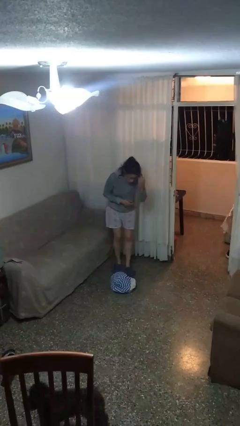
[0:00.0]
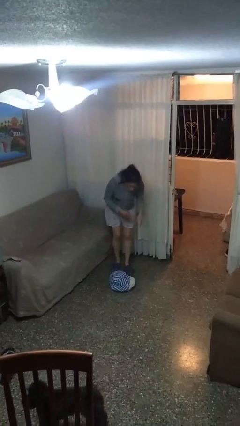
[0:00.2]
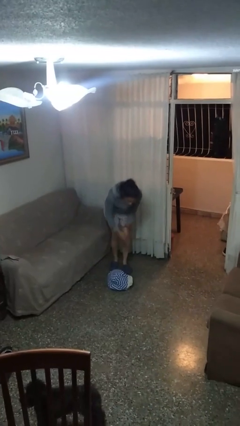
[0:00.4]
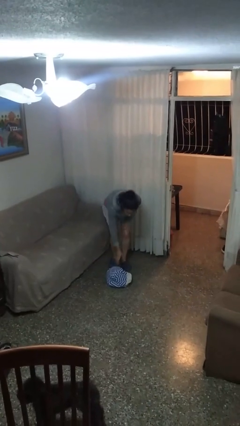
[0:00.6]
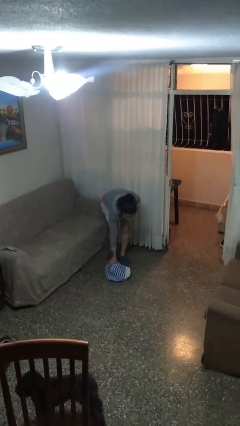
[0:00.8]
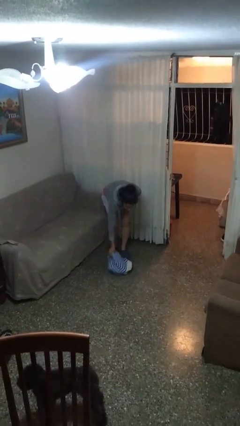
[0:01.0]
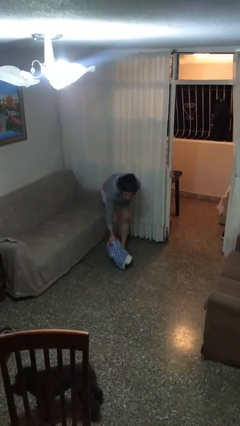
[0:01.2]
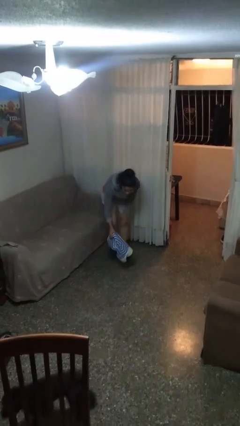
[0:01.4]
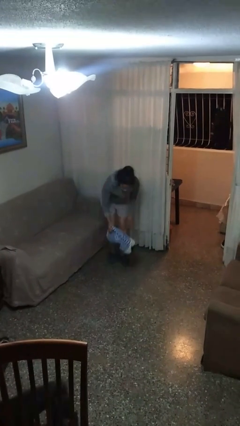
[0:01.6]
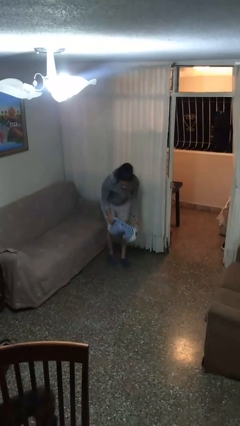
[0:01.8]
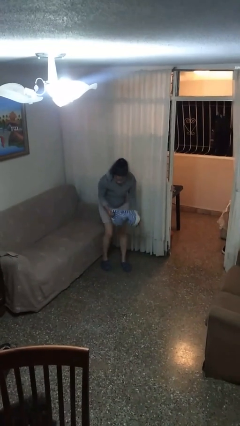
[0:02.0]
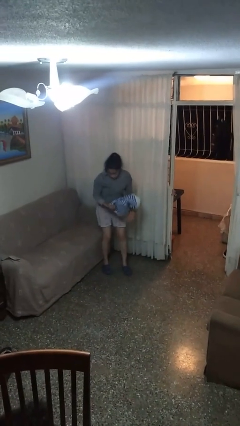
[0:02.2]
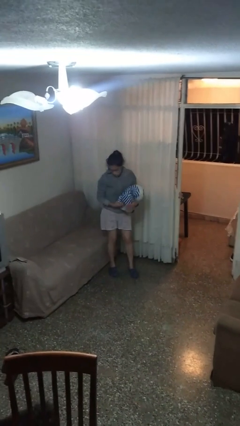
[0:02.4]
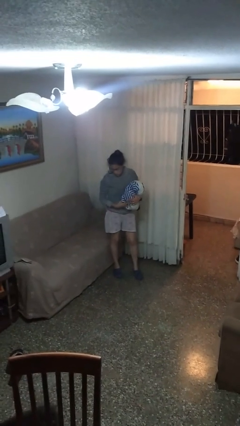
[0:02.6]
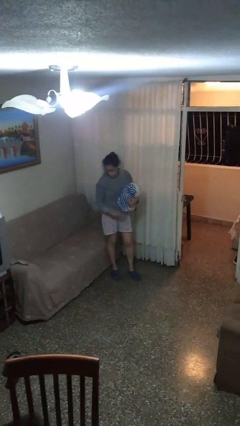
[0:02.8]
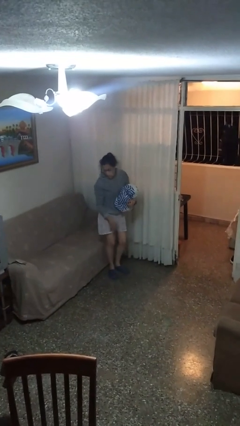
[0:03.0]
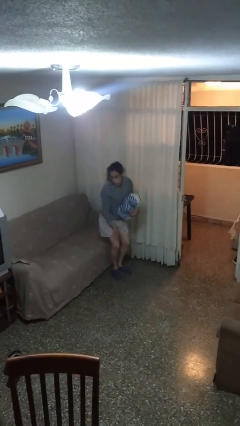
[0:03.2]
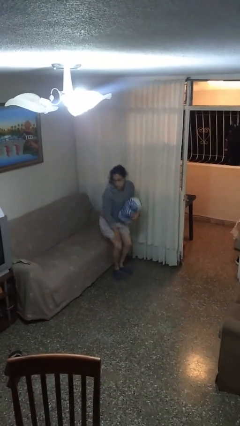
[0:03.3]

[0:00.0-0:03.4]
person picks up object from floor

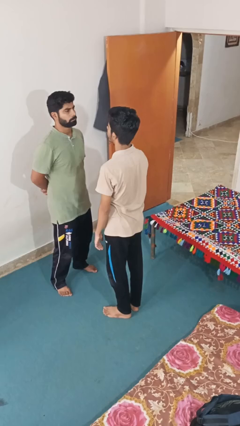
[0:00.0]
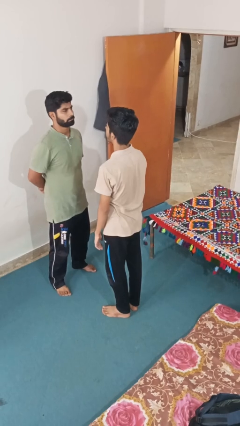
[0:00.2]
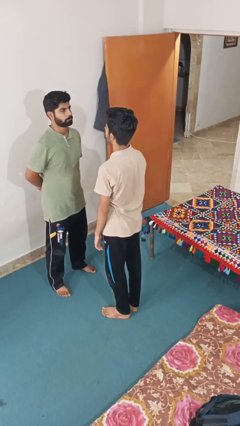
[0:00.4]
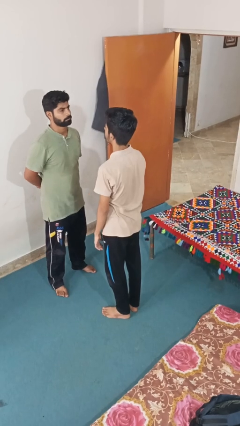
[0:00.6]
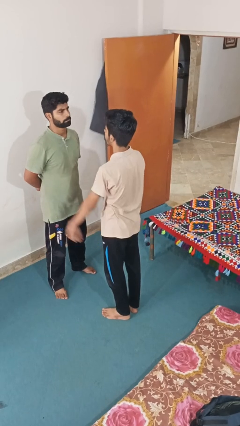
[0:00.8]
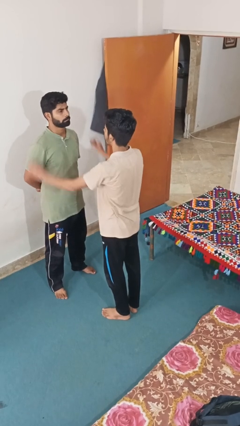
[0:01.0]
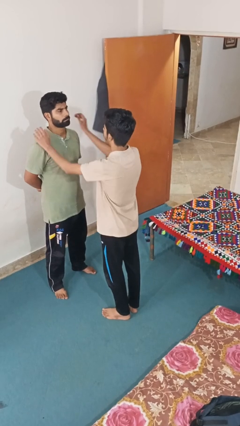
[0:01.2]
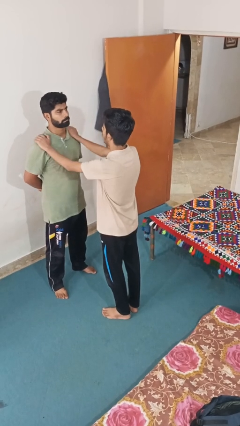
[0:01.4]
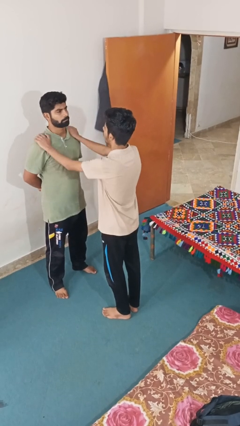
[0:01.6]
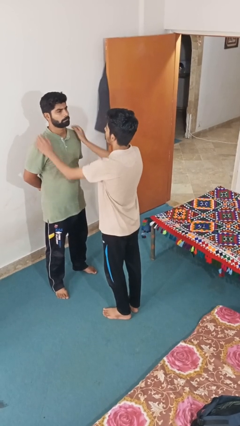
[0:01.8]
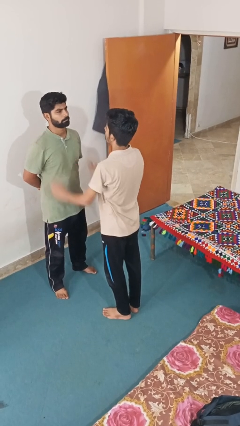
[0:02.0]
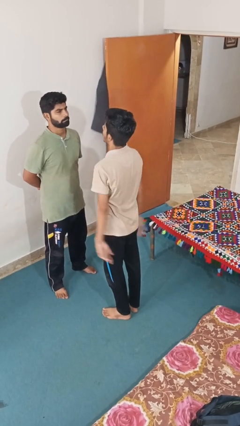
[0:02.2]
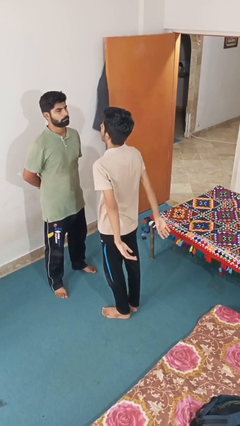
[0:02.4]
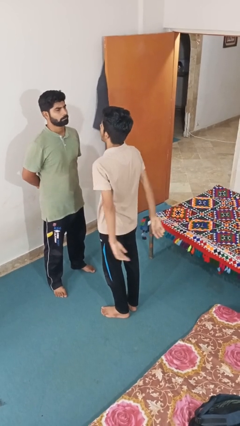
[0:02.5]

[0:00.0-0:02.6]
person pounds shoulders of person

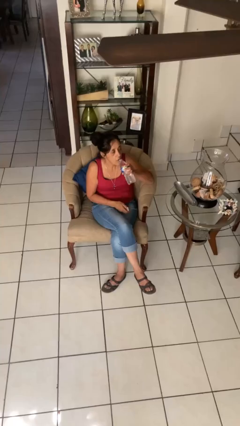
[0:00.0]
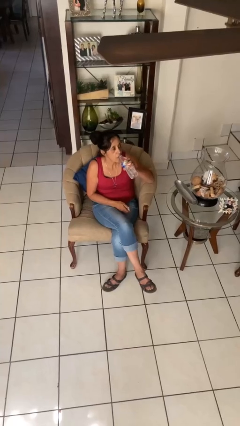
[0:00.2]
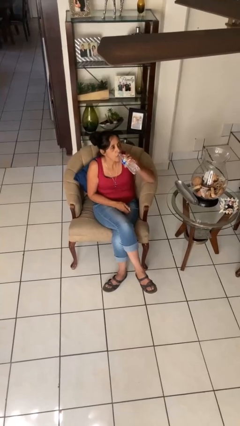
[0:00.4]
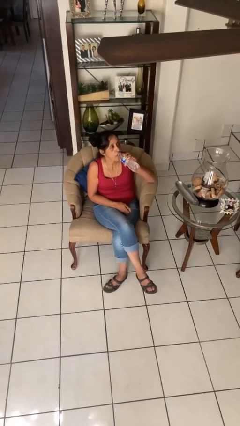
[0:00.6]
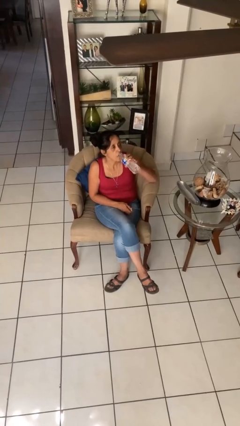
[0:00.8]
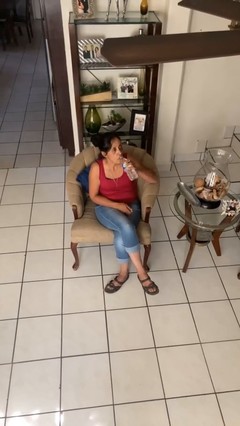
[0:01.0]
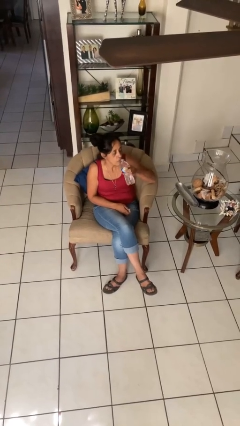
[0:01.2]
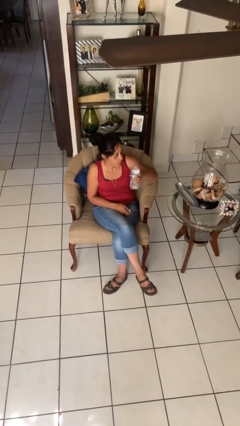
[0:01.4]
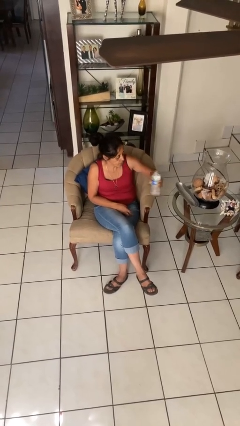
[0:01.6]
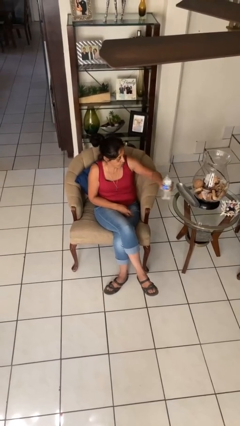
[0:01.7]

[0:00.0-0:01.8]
person drinks from bottle

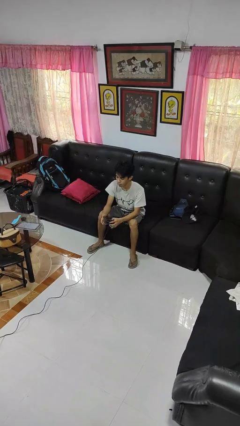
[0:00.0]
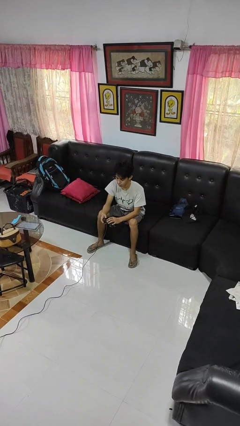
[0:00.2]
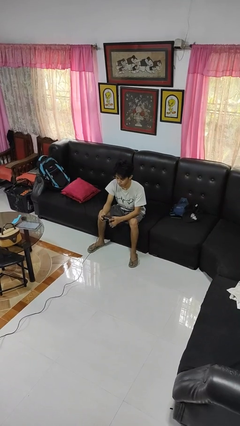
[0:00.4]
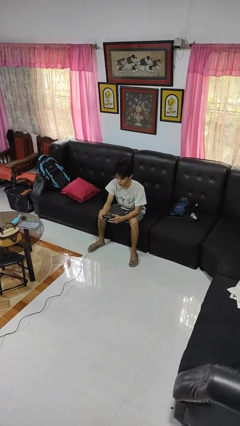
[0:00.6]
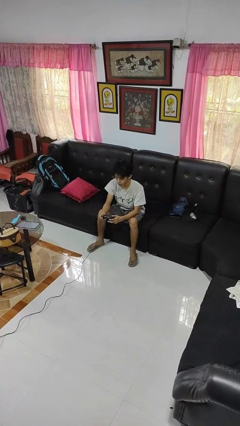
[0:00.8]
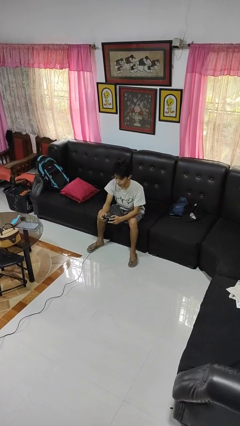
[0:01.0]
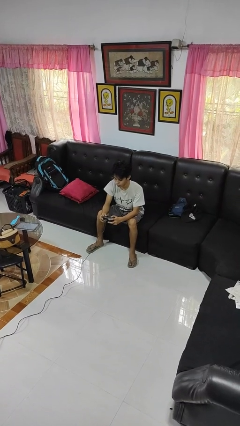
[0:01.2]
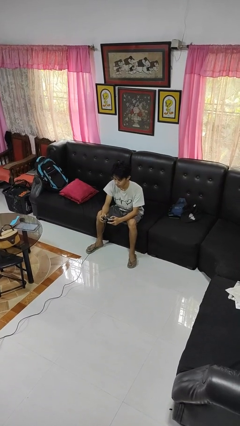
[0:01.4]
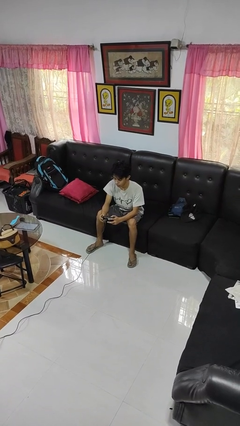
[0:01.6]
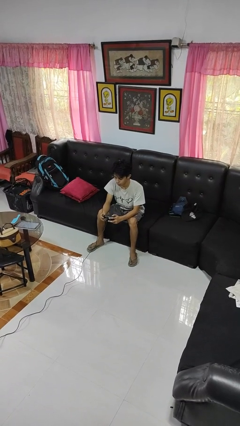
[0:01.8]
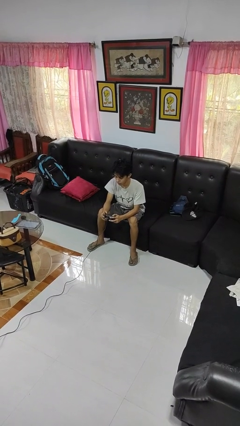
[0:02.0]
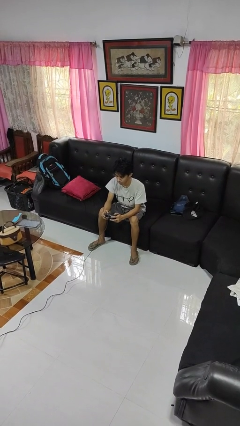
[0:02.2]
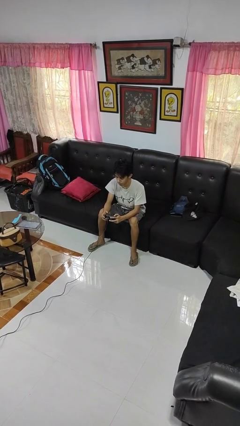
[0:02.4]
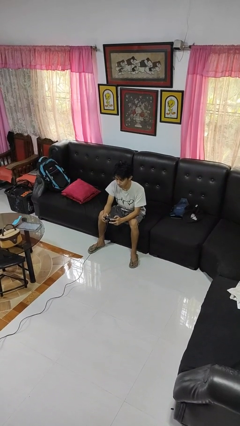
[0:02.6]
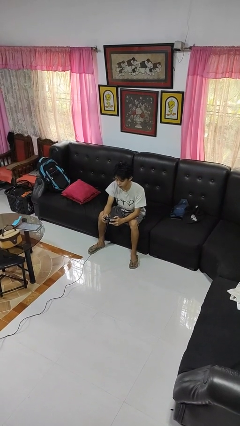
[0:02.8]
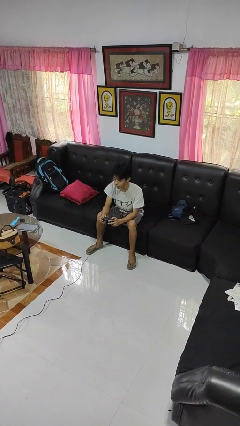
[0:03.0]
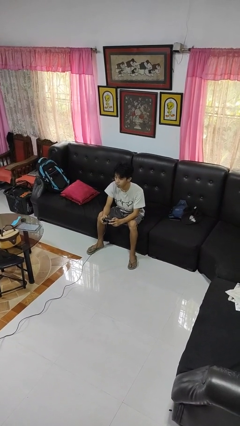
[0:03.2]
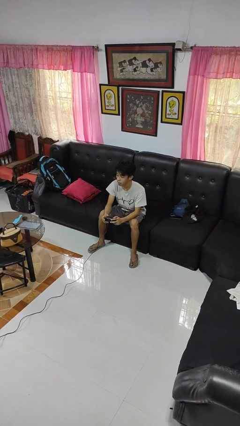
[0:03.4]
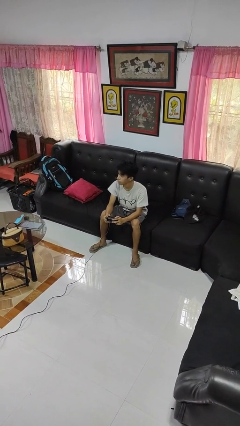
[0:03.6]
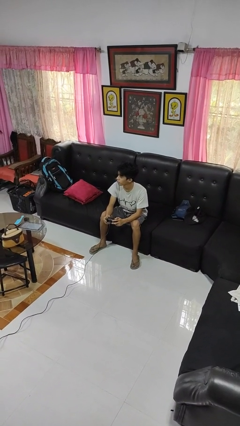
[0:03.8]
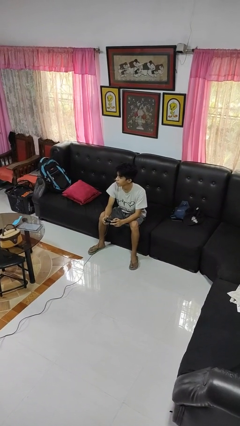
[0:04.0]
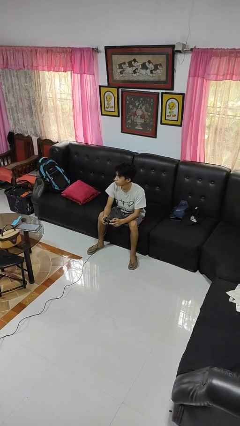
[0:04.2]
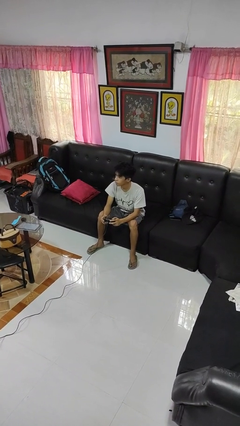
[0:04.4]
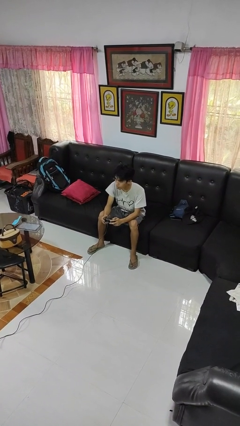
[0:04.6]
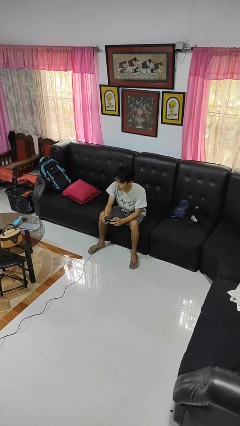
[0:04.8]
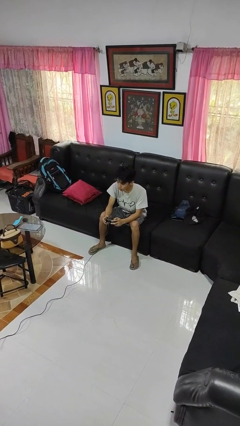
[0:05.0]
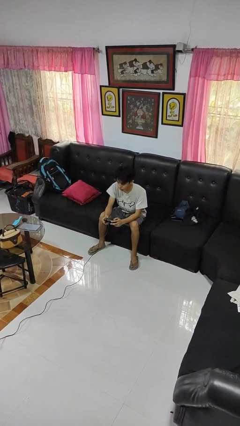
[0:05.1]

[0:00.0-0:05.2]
person interacts with handheld game

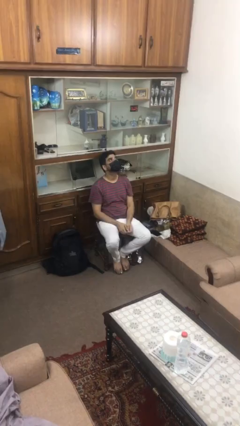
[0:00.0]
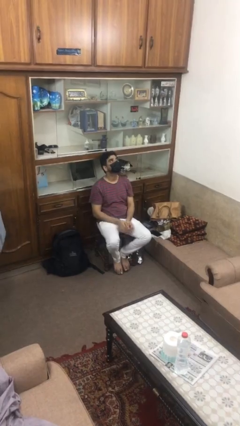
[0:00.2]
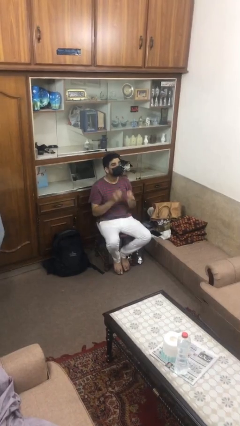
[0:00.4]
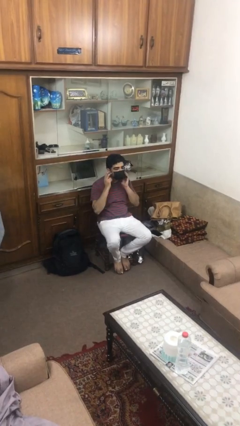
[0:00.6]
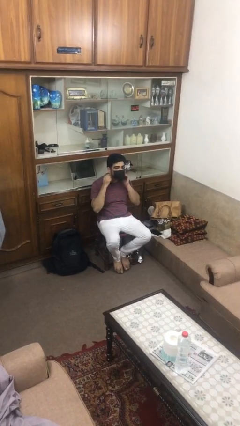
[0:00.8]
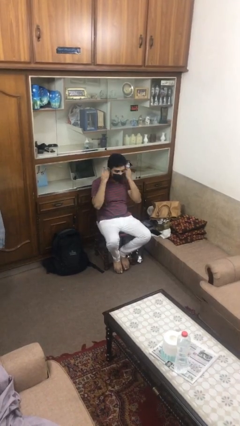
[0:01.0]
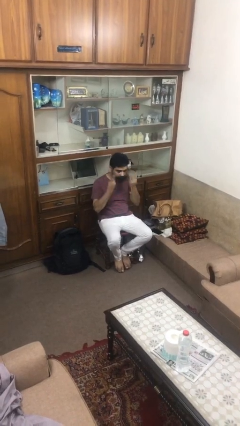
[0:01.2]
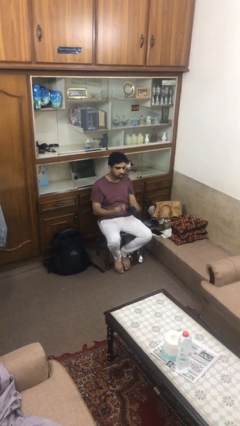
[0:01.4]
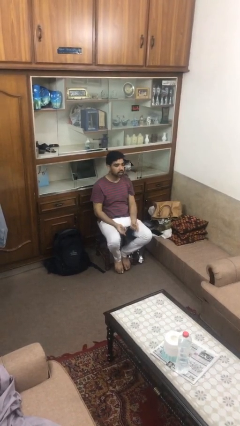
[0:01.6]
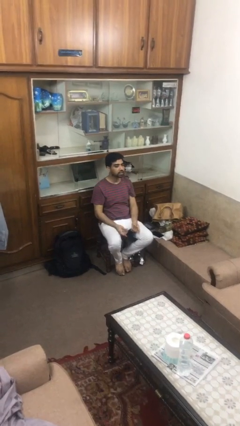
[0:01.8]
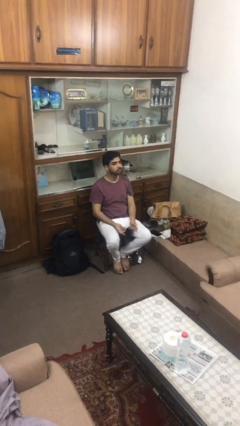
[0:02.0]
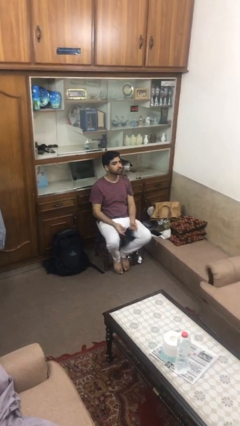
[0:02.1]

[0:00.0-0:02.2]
person takes off facemask

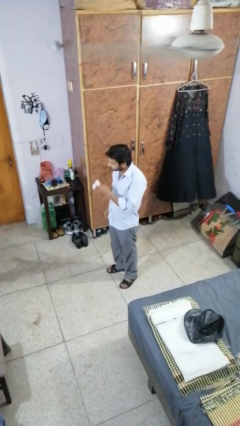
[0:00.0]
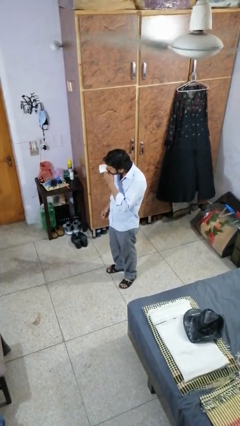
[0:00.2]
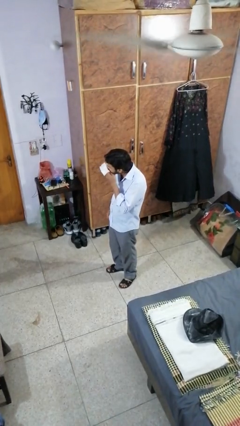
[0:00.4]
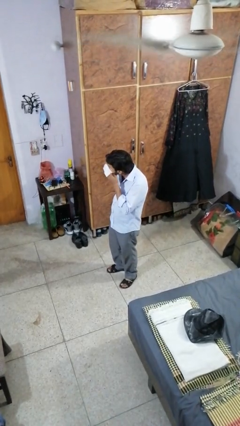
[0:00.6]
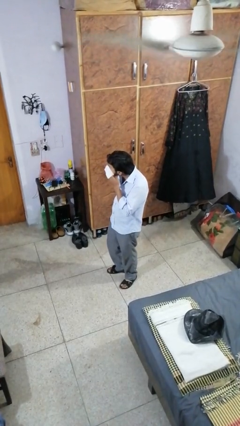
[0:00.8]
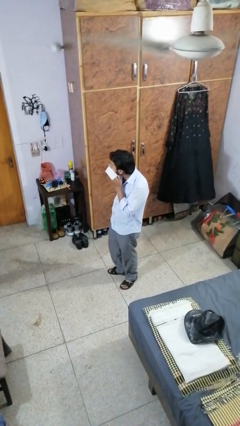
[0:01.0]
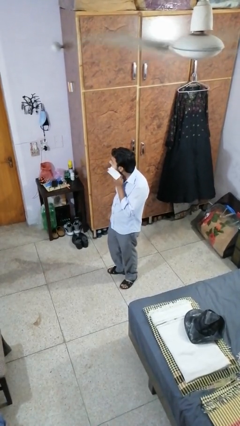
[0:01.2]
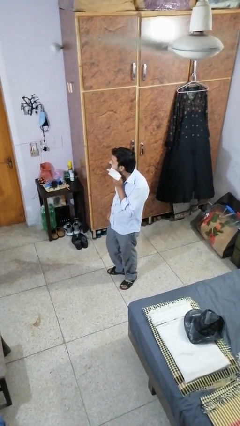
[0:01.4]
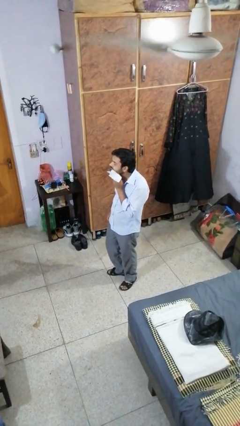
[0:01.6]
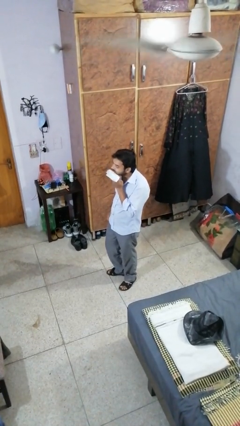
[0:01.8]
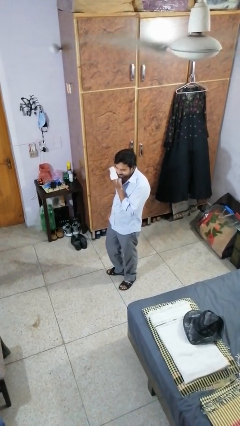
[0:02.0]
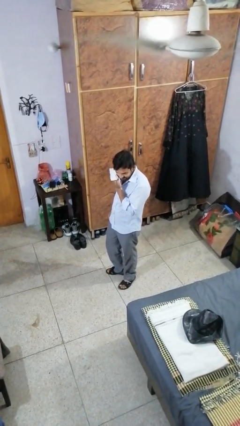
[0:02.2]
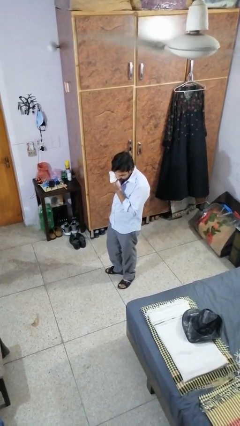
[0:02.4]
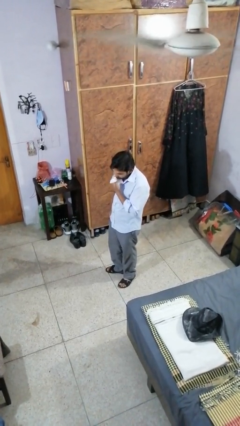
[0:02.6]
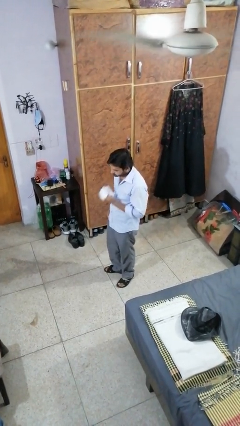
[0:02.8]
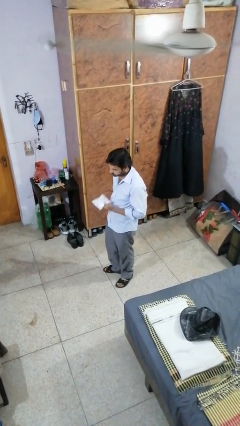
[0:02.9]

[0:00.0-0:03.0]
person wipes mouth with napkin
